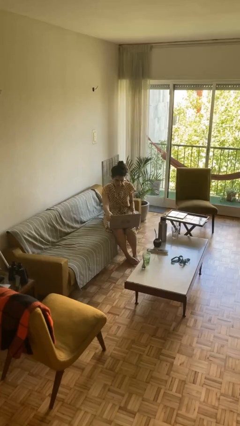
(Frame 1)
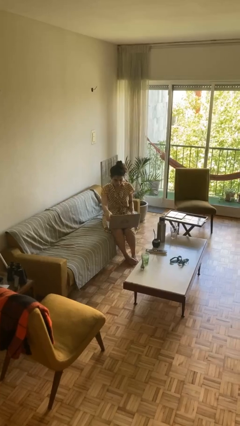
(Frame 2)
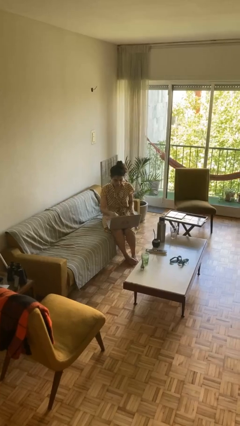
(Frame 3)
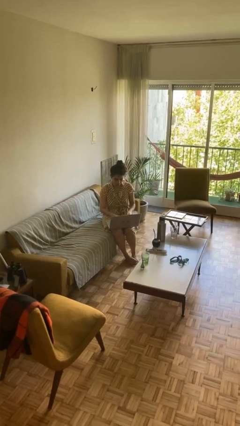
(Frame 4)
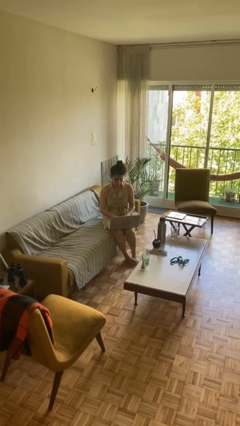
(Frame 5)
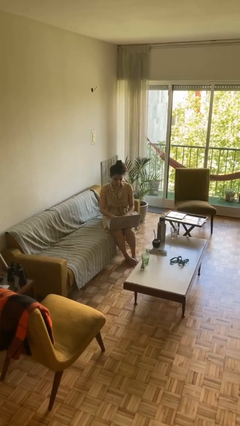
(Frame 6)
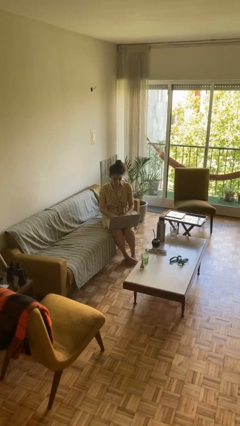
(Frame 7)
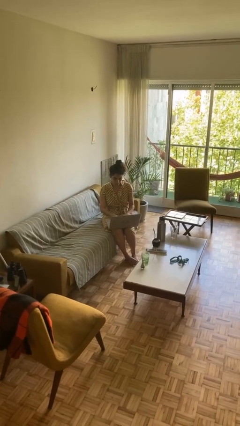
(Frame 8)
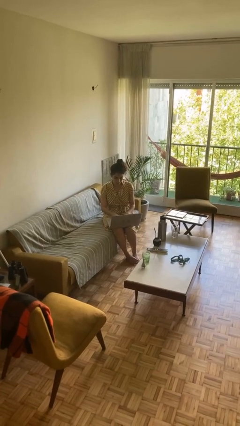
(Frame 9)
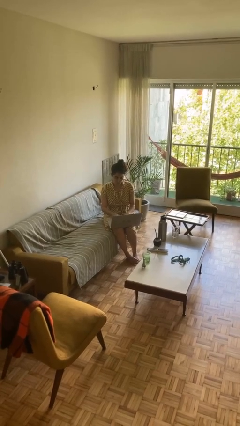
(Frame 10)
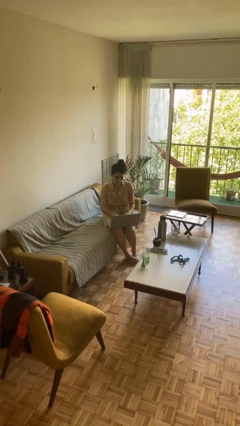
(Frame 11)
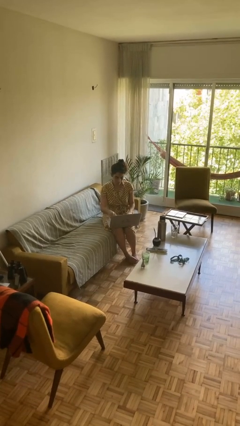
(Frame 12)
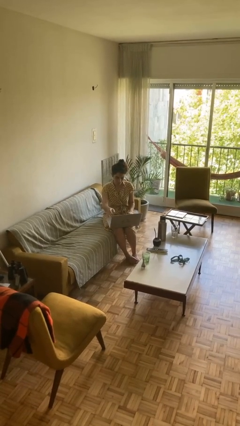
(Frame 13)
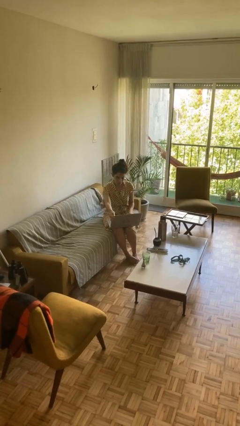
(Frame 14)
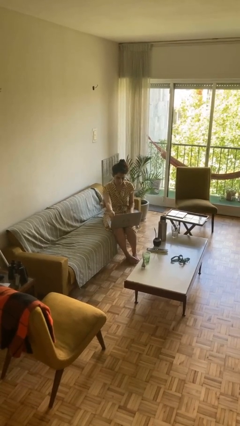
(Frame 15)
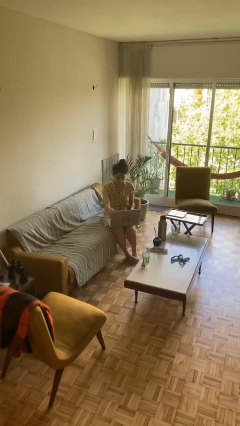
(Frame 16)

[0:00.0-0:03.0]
person interacts with laptop

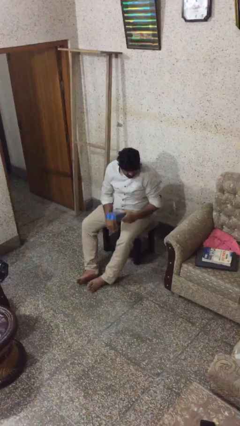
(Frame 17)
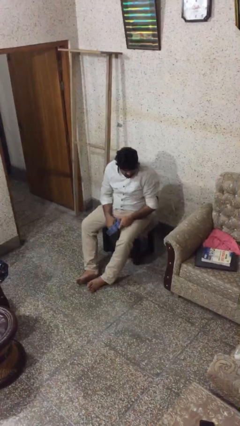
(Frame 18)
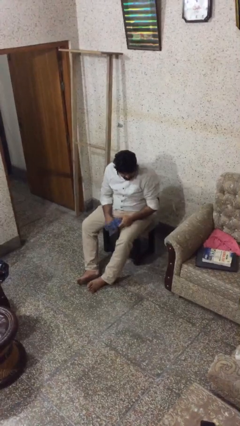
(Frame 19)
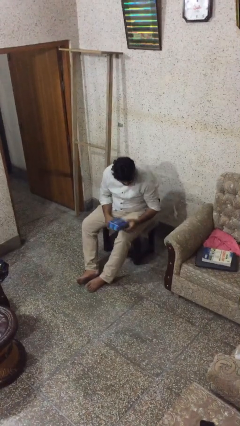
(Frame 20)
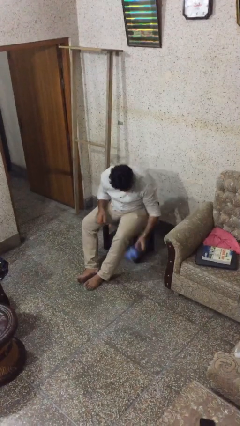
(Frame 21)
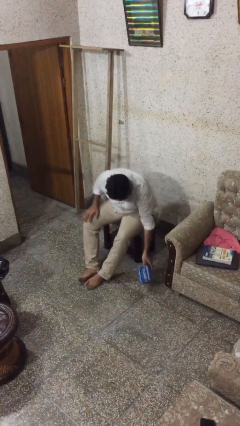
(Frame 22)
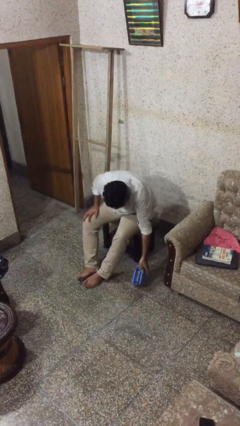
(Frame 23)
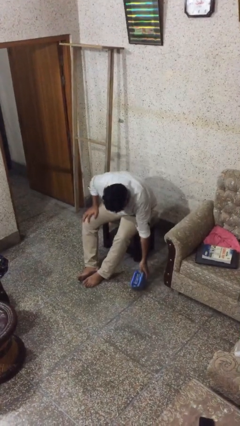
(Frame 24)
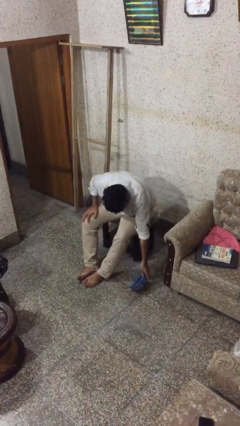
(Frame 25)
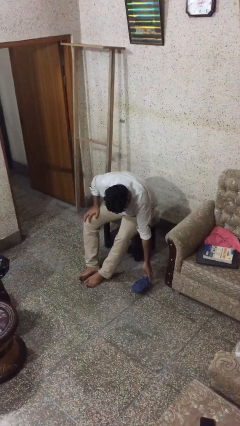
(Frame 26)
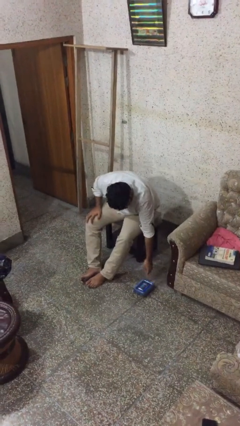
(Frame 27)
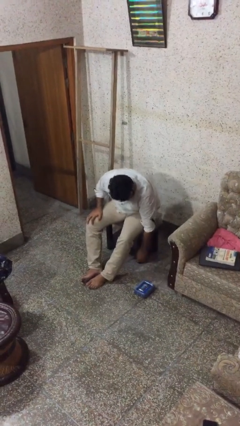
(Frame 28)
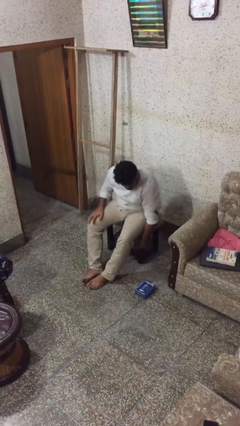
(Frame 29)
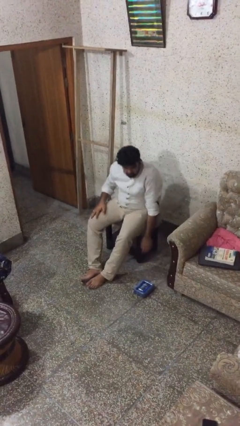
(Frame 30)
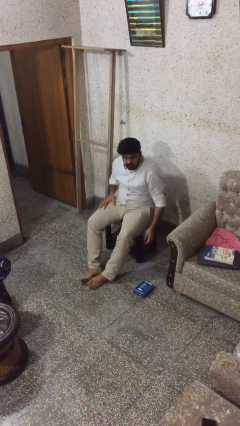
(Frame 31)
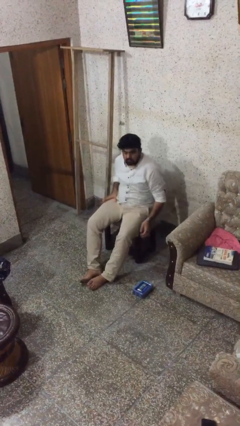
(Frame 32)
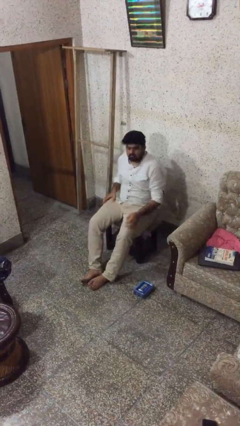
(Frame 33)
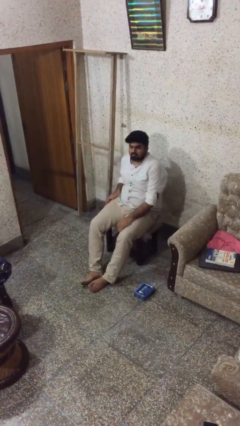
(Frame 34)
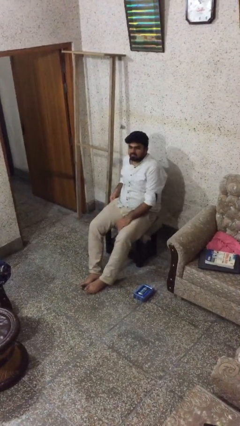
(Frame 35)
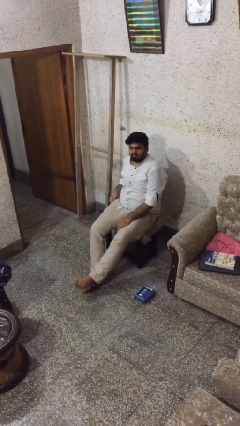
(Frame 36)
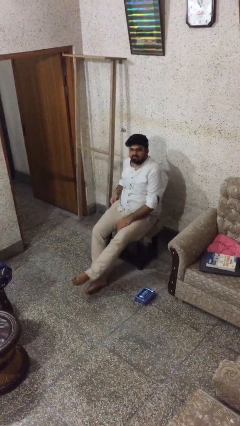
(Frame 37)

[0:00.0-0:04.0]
person puts down object on floor

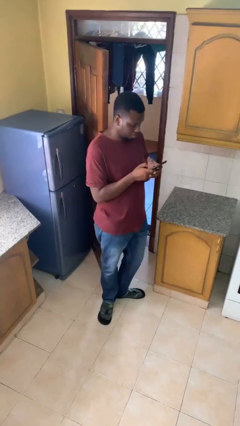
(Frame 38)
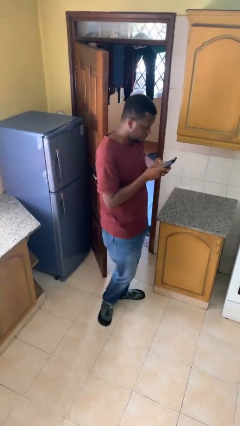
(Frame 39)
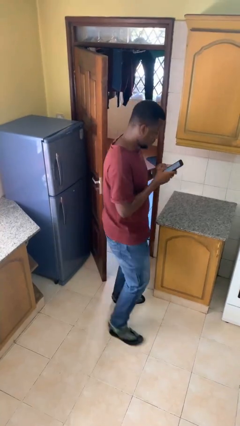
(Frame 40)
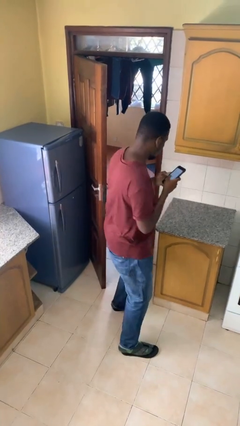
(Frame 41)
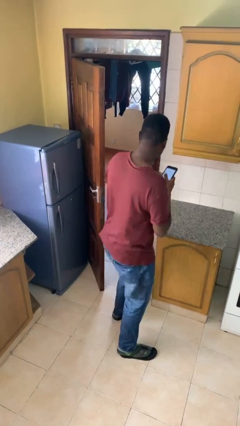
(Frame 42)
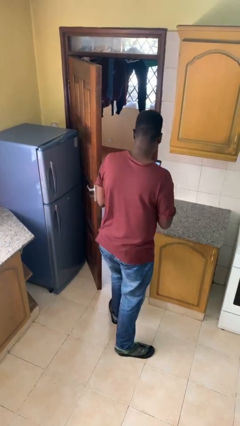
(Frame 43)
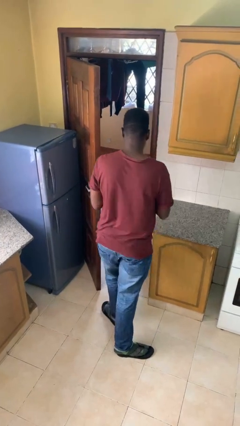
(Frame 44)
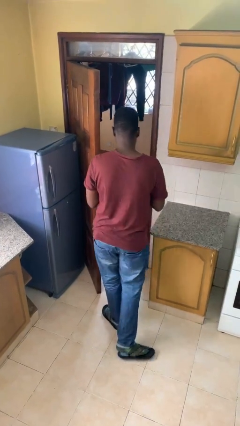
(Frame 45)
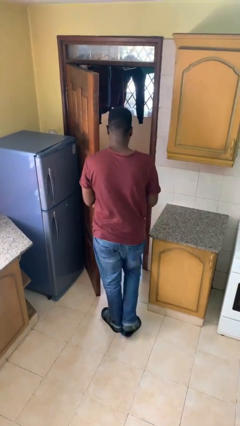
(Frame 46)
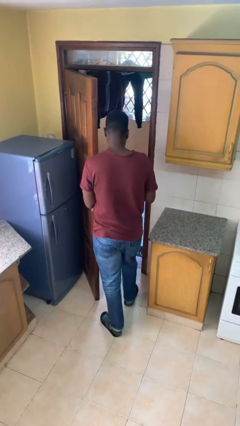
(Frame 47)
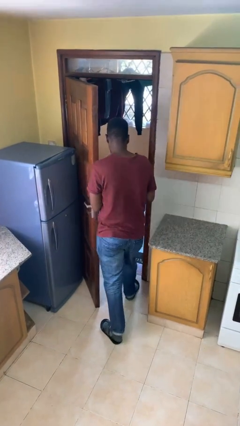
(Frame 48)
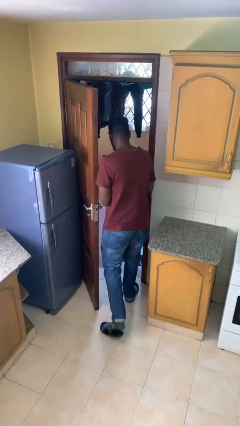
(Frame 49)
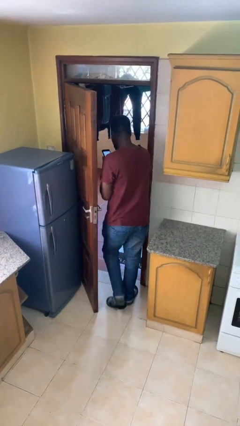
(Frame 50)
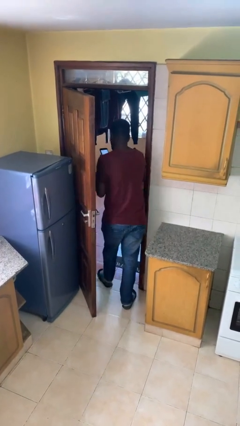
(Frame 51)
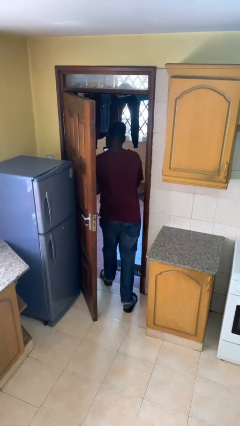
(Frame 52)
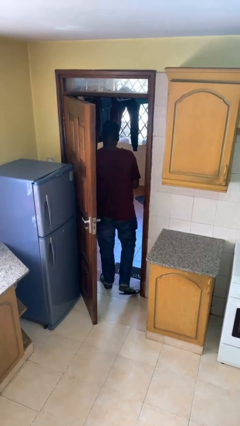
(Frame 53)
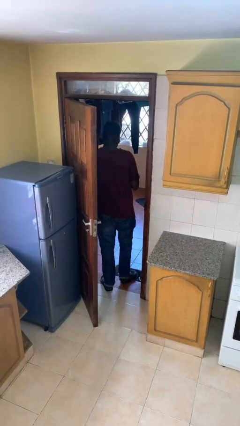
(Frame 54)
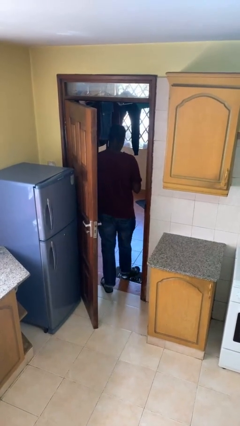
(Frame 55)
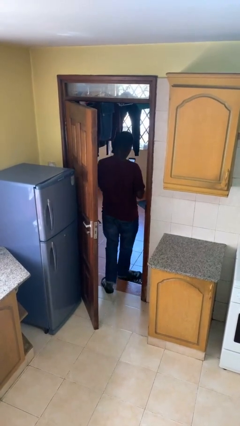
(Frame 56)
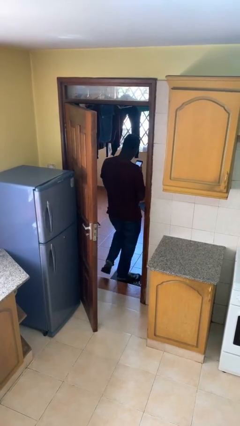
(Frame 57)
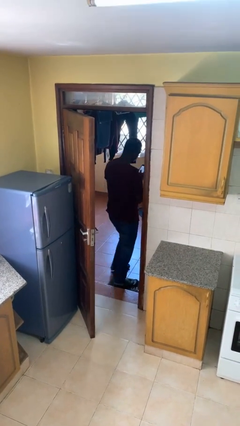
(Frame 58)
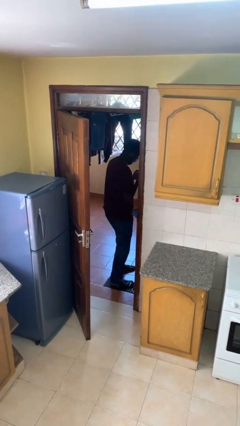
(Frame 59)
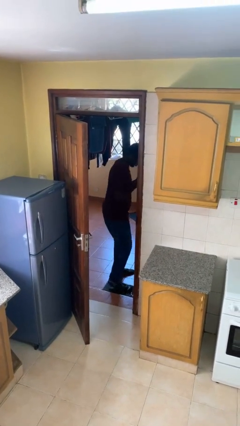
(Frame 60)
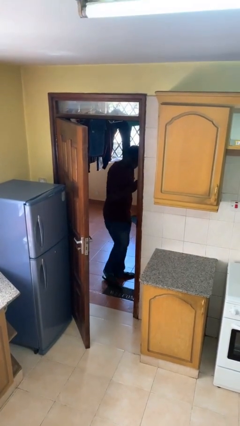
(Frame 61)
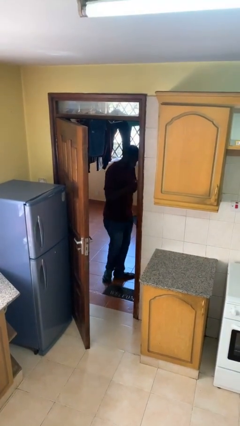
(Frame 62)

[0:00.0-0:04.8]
person exits scene through structure

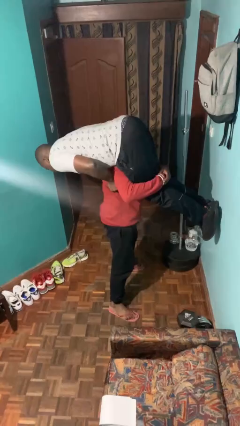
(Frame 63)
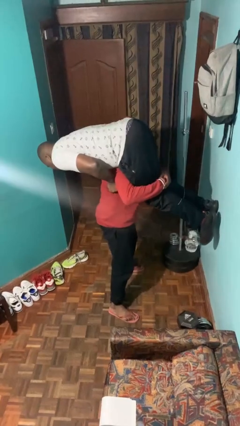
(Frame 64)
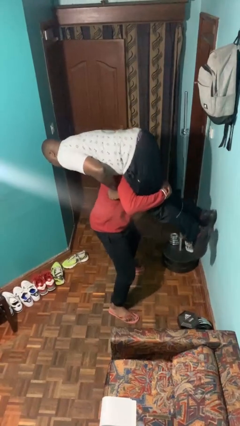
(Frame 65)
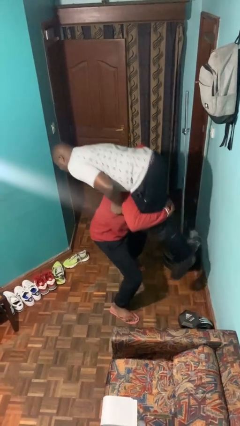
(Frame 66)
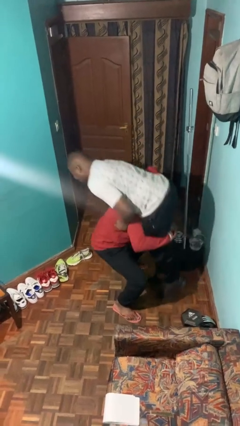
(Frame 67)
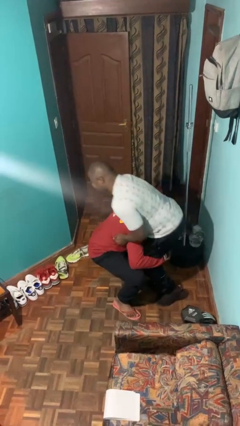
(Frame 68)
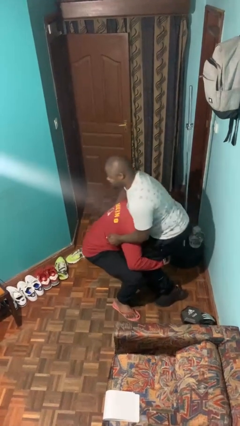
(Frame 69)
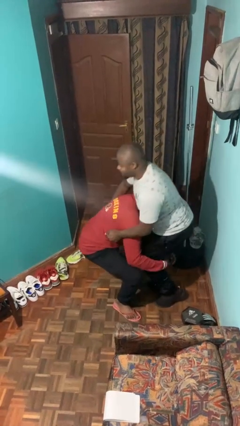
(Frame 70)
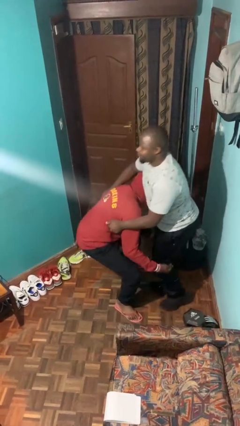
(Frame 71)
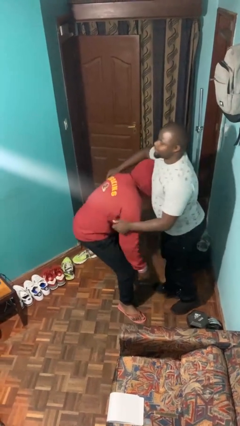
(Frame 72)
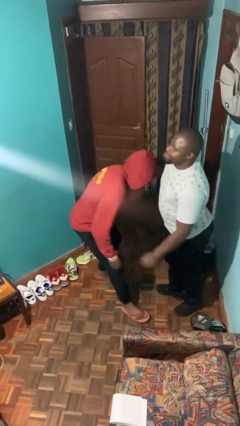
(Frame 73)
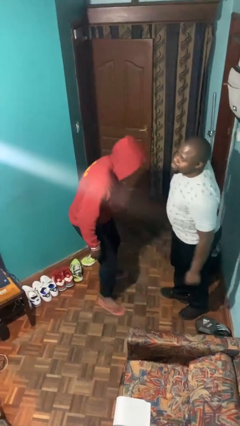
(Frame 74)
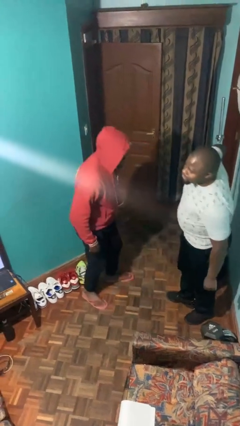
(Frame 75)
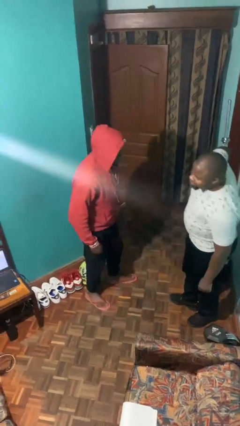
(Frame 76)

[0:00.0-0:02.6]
person puts down person

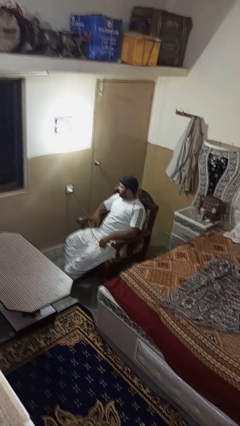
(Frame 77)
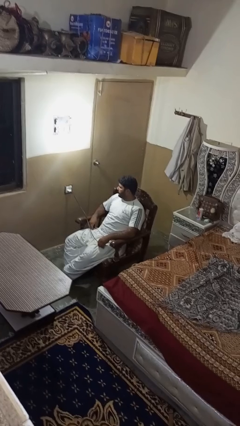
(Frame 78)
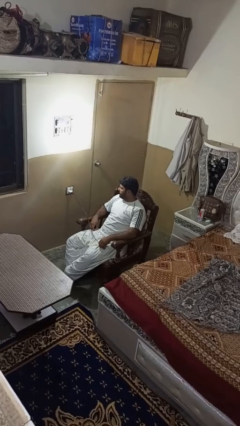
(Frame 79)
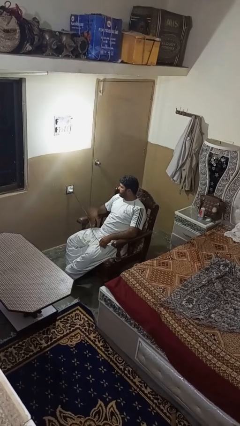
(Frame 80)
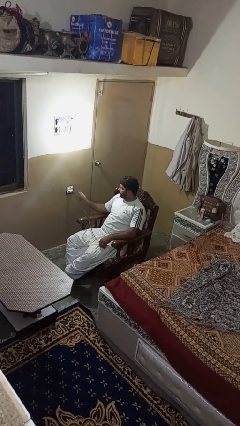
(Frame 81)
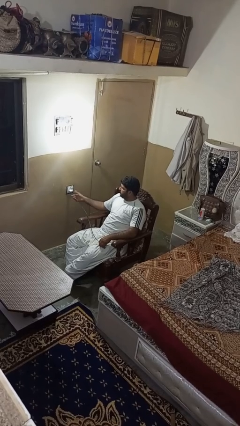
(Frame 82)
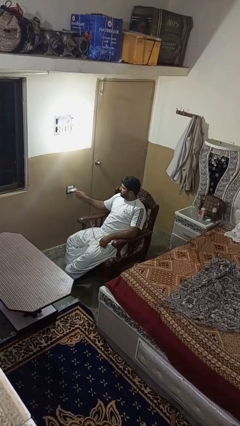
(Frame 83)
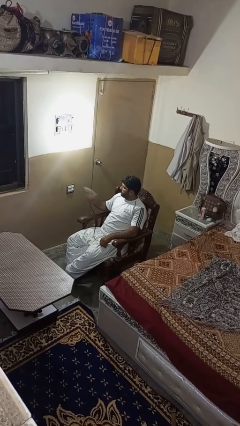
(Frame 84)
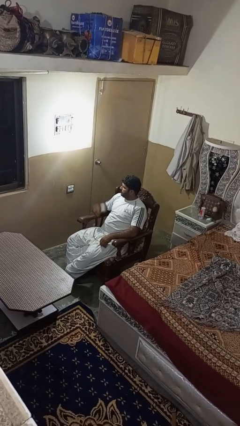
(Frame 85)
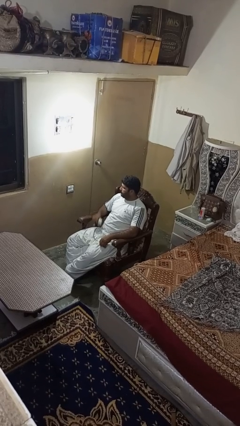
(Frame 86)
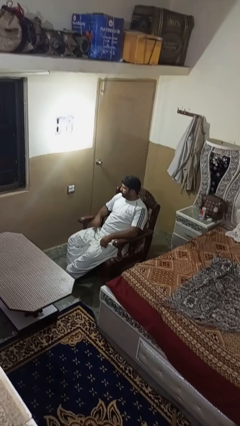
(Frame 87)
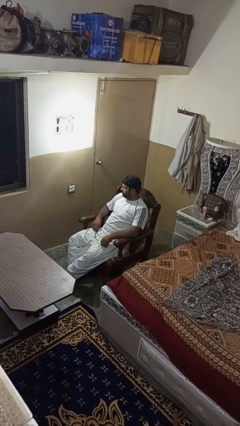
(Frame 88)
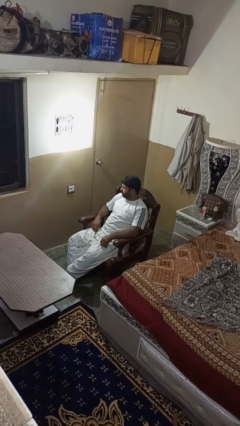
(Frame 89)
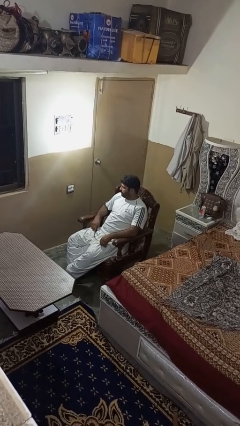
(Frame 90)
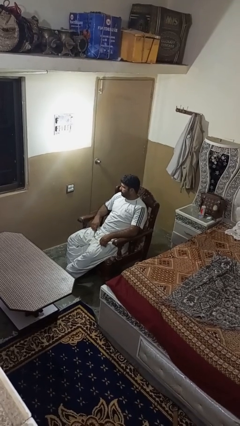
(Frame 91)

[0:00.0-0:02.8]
person unplugs from electrical socket

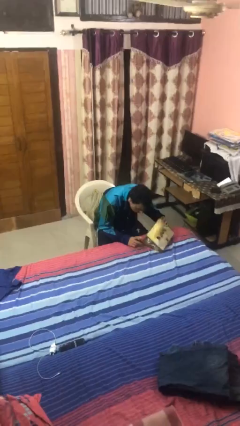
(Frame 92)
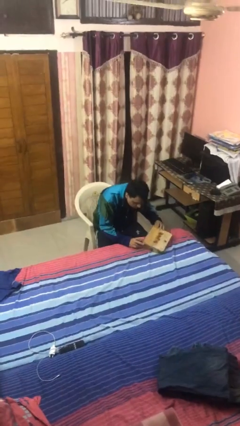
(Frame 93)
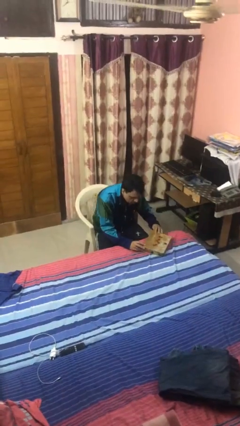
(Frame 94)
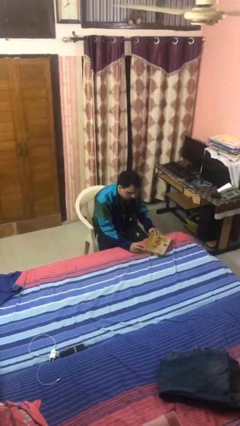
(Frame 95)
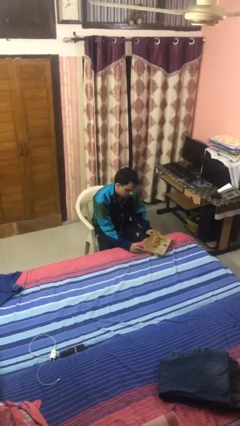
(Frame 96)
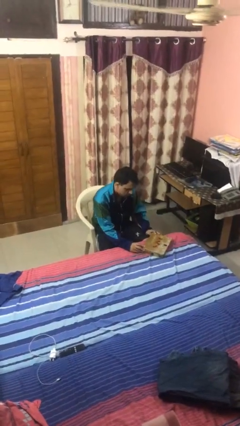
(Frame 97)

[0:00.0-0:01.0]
person closes jewelry box
